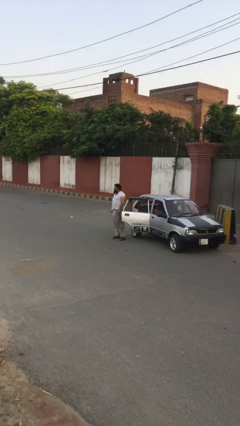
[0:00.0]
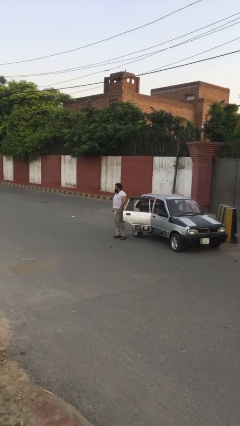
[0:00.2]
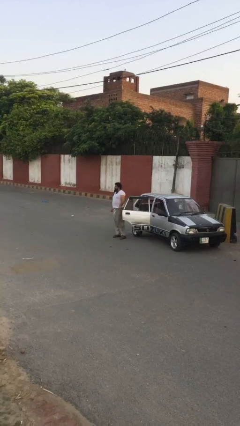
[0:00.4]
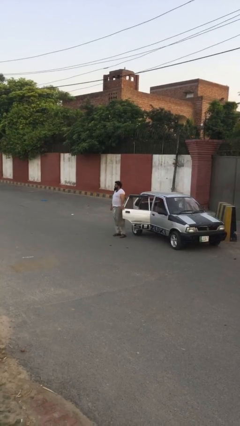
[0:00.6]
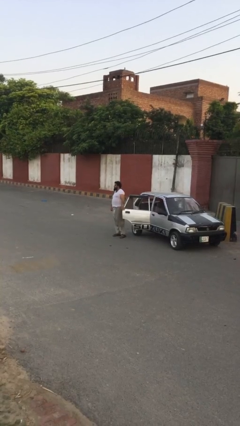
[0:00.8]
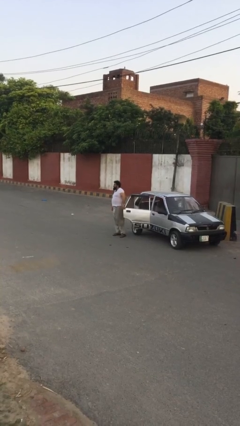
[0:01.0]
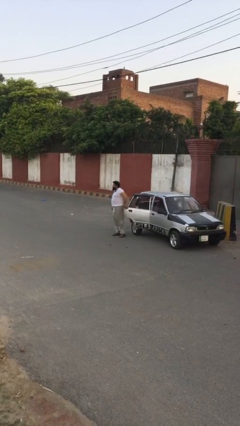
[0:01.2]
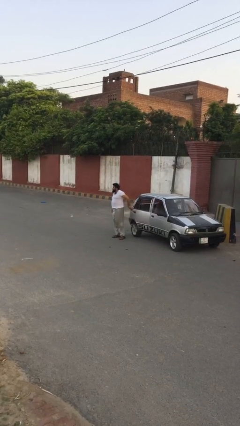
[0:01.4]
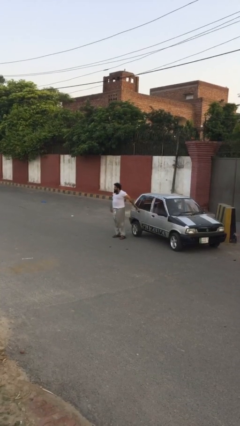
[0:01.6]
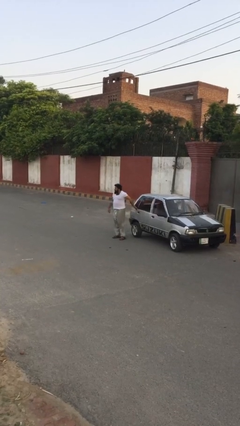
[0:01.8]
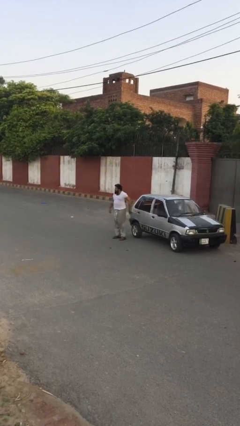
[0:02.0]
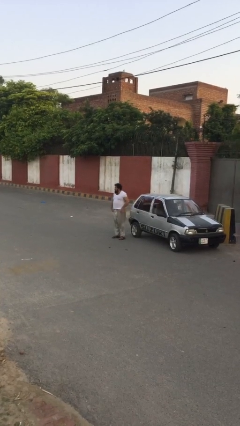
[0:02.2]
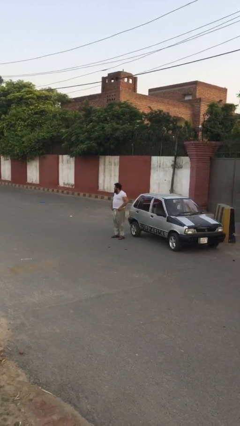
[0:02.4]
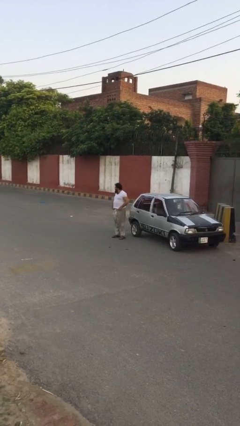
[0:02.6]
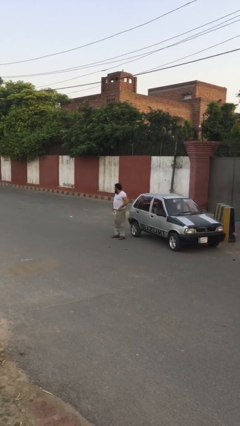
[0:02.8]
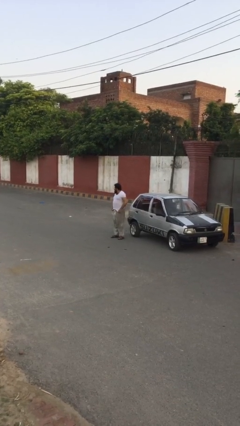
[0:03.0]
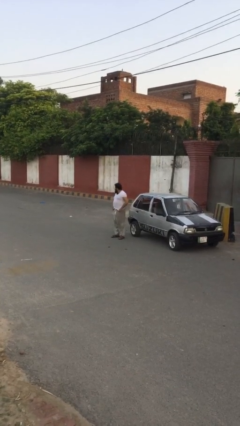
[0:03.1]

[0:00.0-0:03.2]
person closes car door

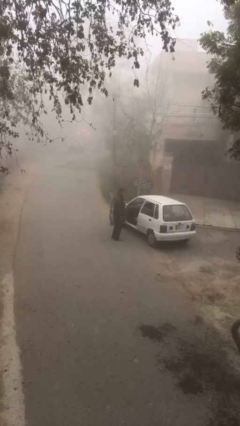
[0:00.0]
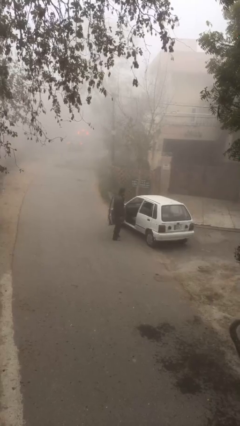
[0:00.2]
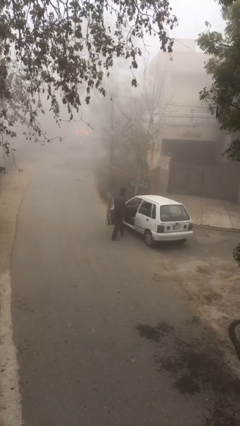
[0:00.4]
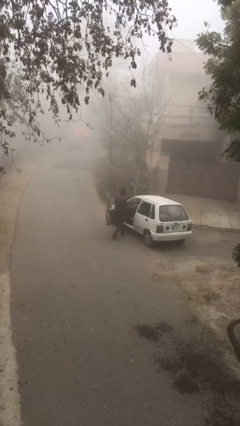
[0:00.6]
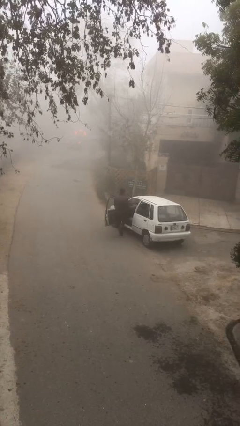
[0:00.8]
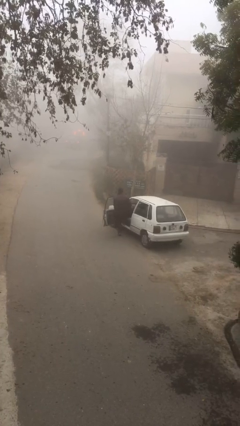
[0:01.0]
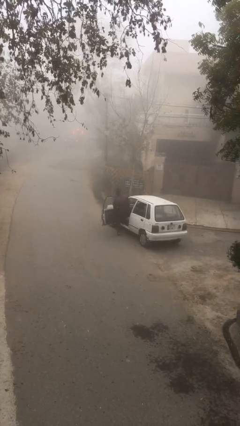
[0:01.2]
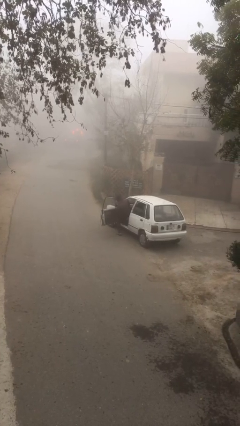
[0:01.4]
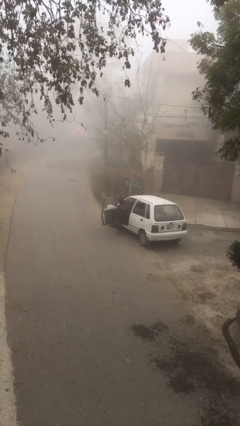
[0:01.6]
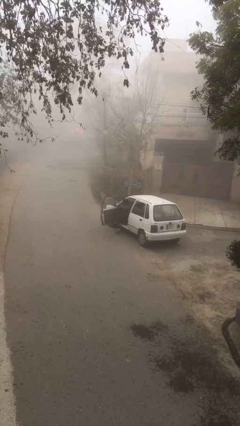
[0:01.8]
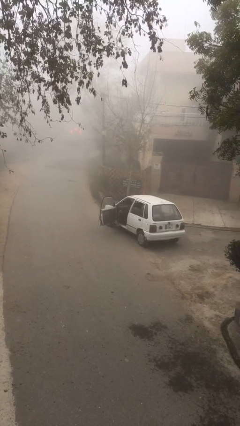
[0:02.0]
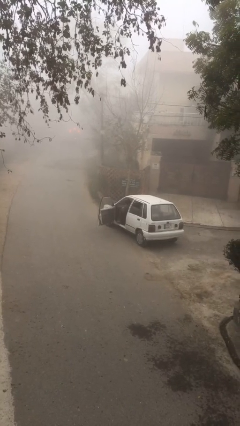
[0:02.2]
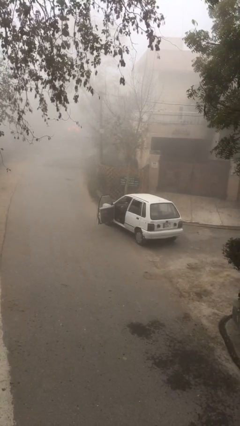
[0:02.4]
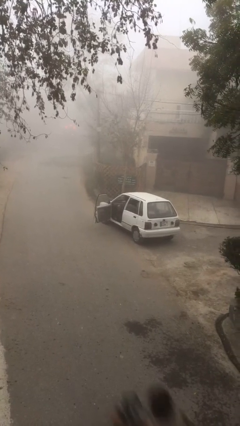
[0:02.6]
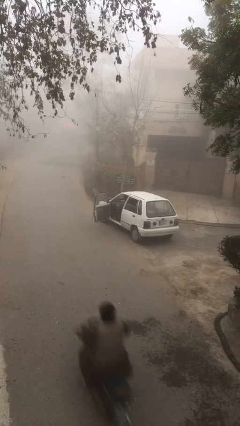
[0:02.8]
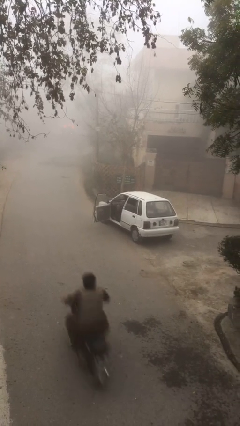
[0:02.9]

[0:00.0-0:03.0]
person enters car

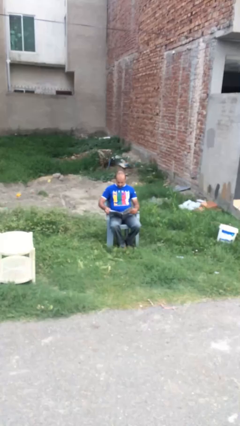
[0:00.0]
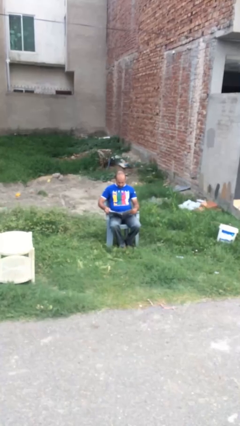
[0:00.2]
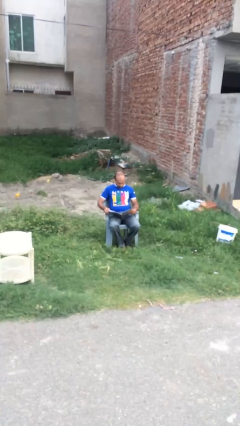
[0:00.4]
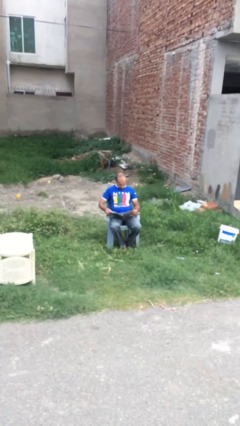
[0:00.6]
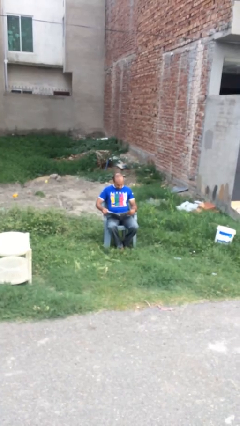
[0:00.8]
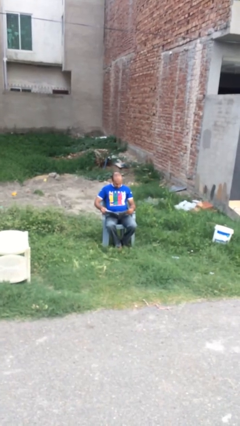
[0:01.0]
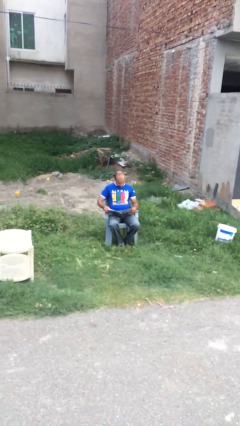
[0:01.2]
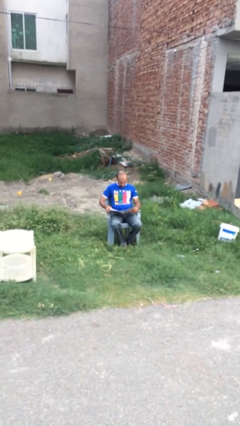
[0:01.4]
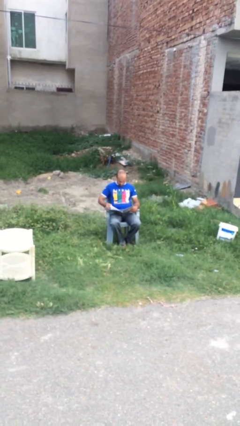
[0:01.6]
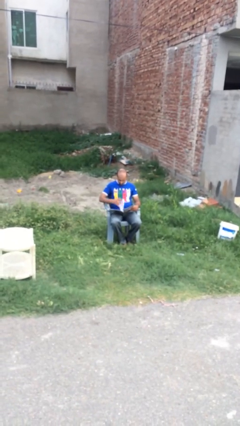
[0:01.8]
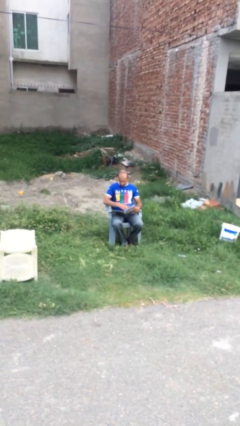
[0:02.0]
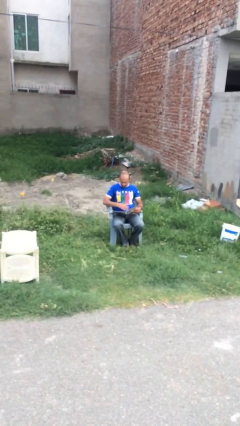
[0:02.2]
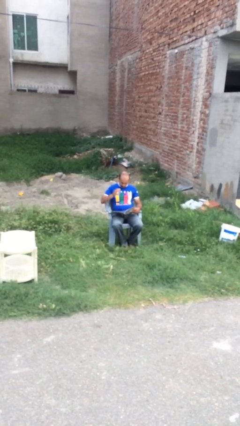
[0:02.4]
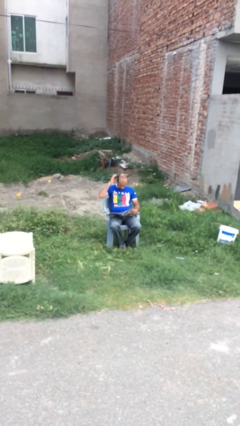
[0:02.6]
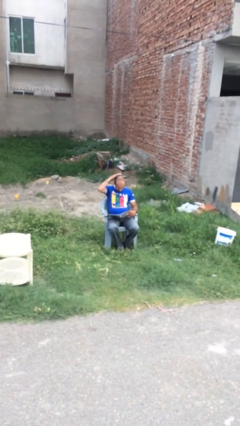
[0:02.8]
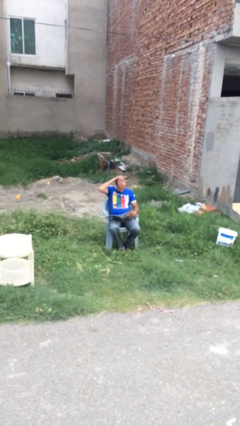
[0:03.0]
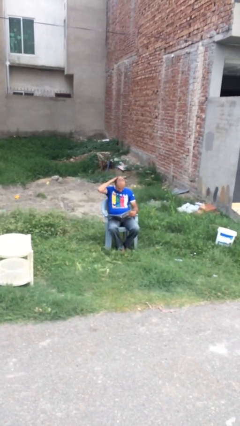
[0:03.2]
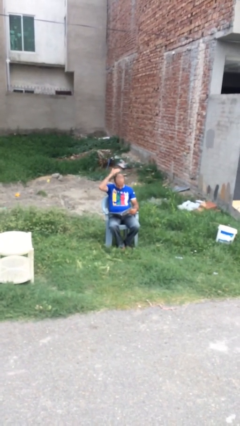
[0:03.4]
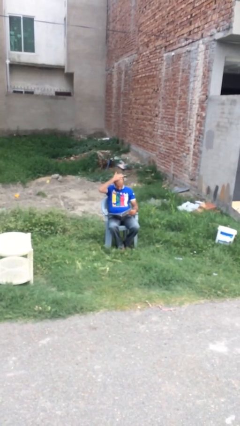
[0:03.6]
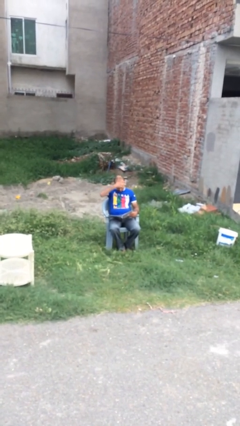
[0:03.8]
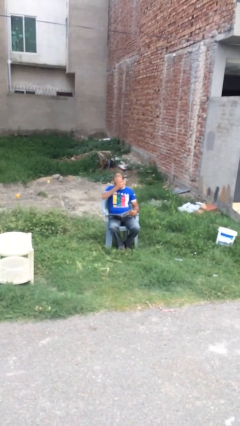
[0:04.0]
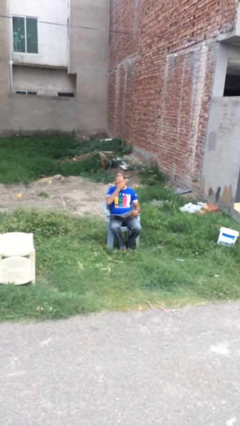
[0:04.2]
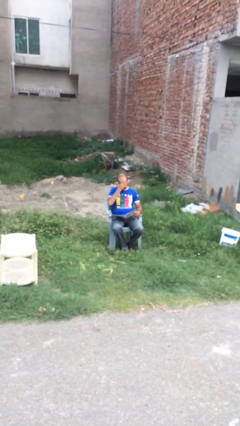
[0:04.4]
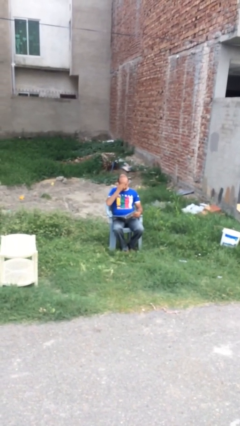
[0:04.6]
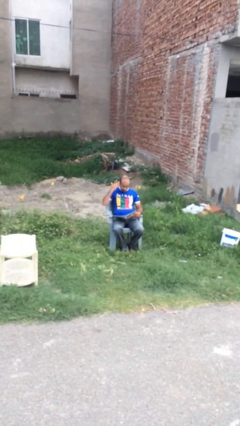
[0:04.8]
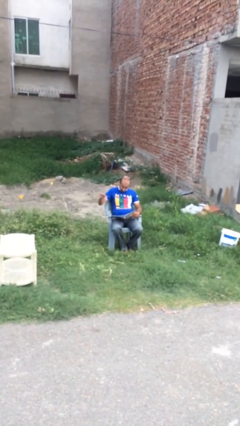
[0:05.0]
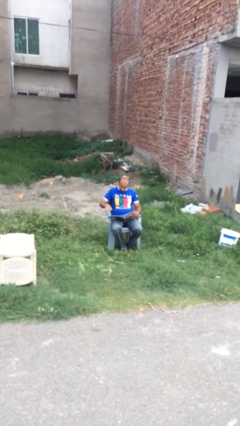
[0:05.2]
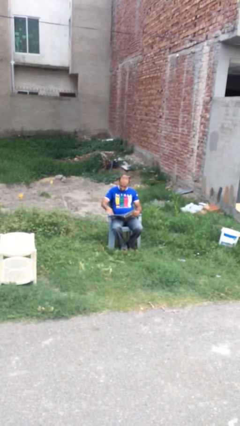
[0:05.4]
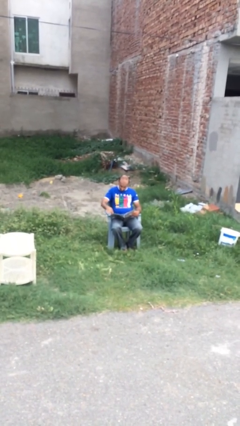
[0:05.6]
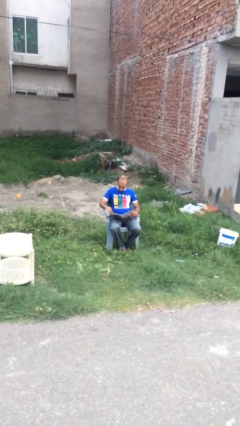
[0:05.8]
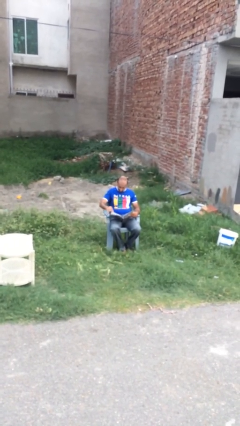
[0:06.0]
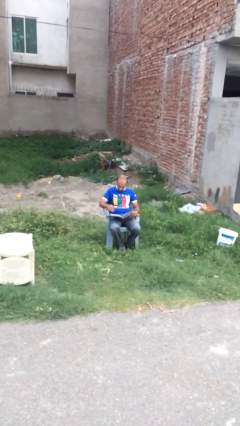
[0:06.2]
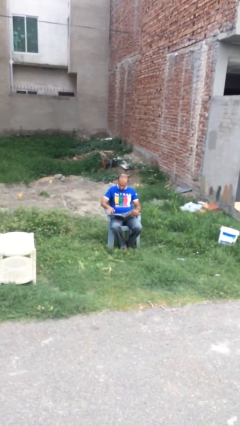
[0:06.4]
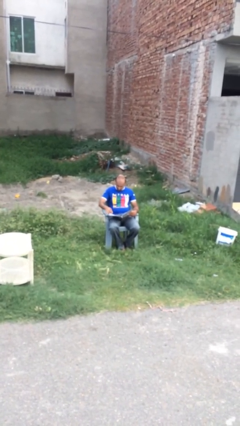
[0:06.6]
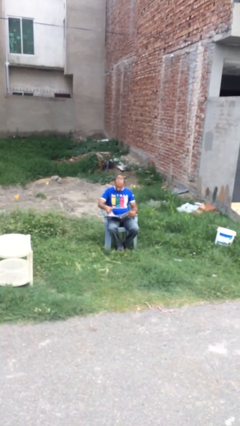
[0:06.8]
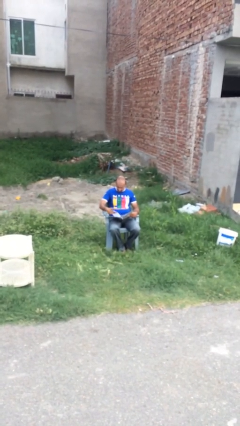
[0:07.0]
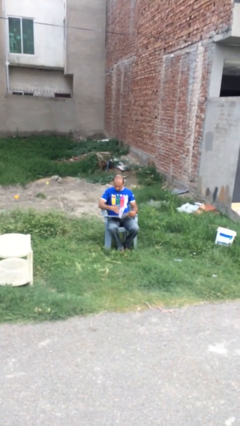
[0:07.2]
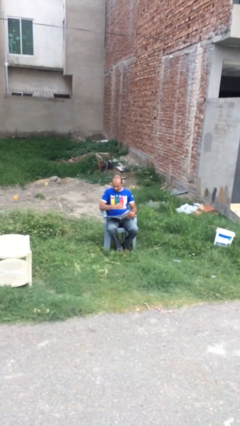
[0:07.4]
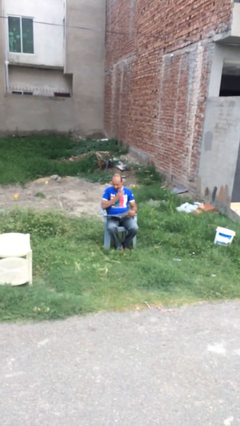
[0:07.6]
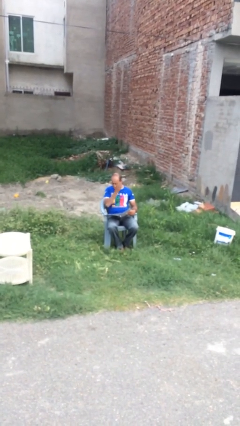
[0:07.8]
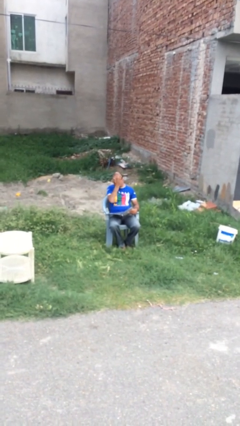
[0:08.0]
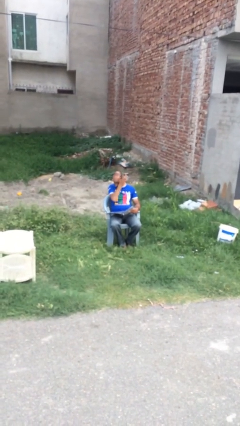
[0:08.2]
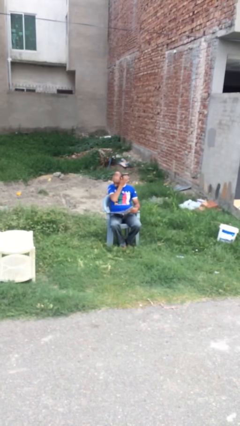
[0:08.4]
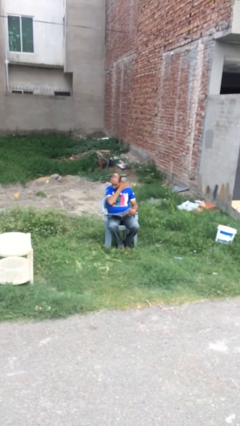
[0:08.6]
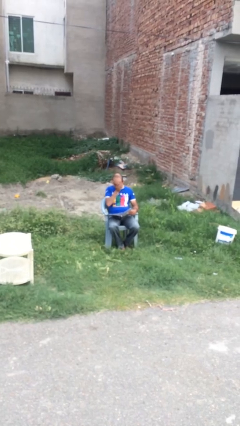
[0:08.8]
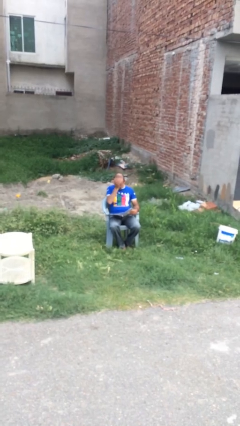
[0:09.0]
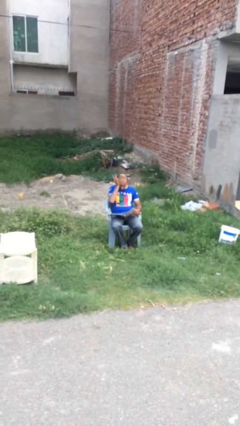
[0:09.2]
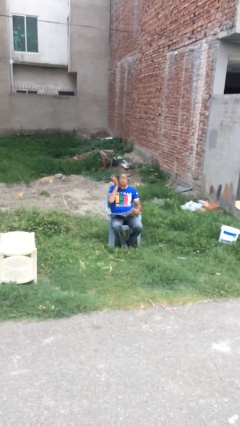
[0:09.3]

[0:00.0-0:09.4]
person reads document

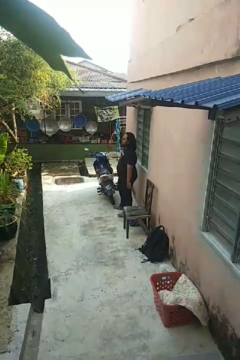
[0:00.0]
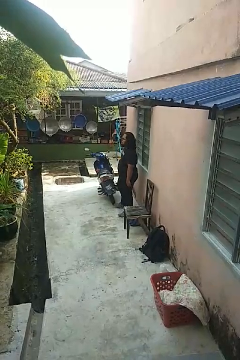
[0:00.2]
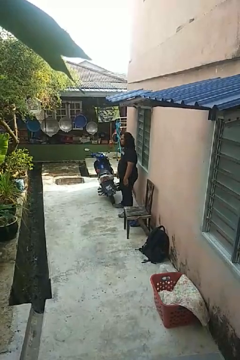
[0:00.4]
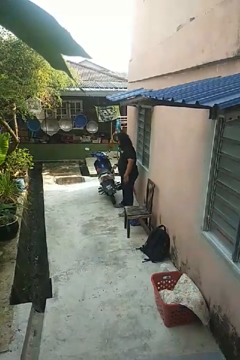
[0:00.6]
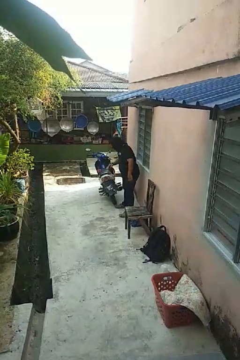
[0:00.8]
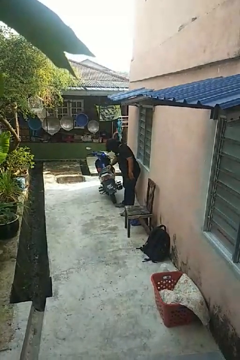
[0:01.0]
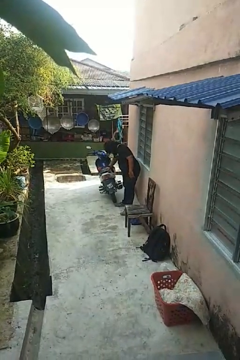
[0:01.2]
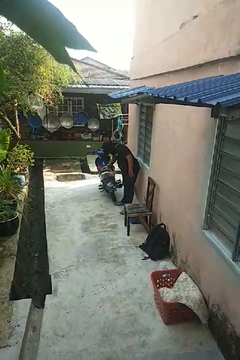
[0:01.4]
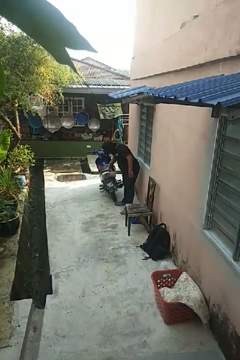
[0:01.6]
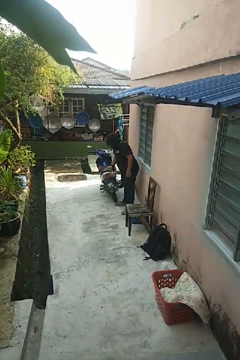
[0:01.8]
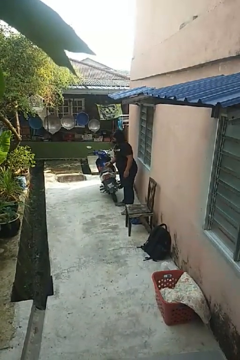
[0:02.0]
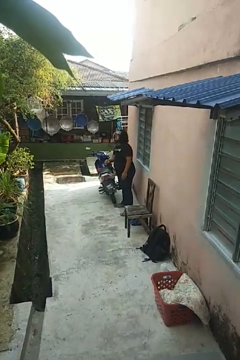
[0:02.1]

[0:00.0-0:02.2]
person taps object with finger

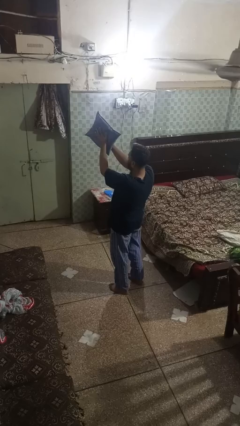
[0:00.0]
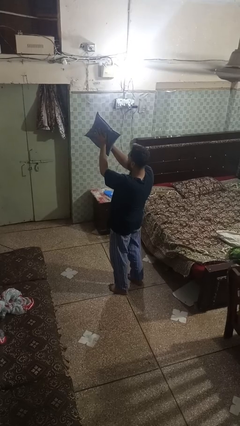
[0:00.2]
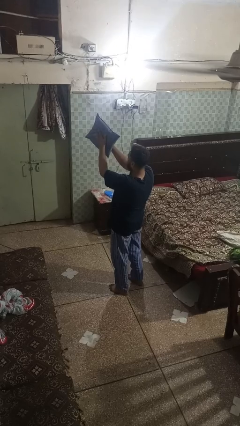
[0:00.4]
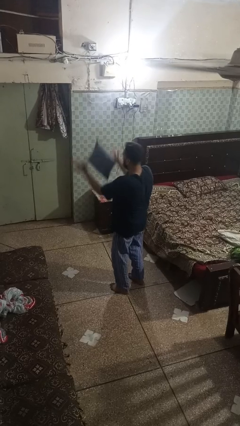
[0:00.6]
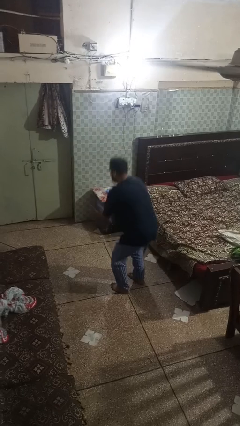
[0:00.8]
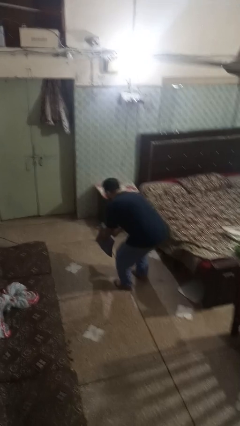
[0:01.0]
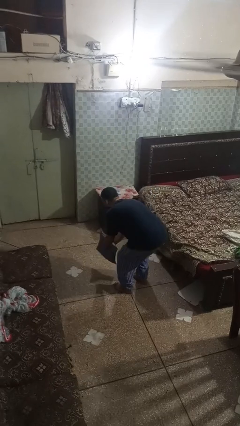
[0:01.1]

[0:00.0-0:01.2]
person drops object
